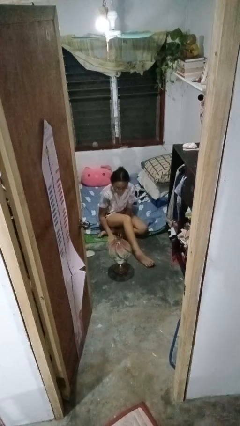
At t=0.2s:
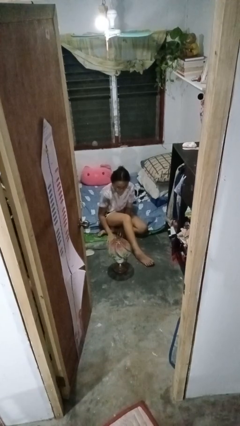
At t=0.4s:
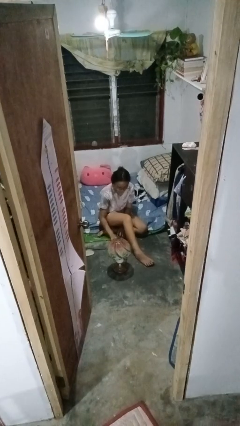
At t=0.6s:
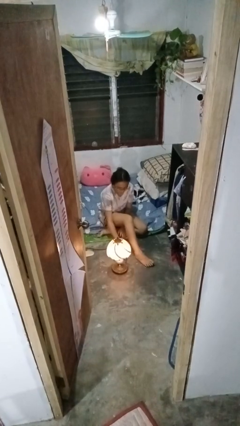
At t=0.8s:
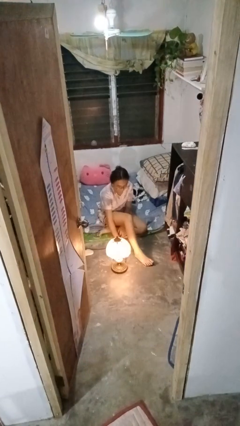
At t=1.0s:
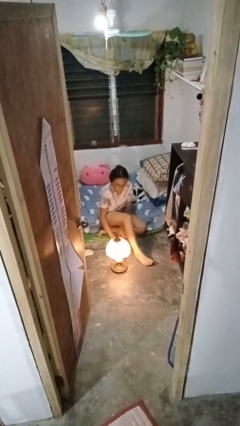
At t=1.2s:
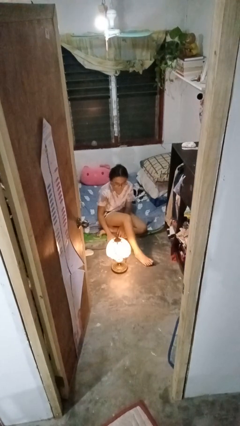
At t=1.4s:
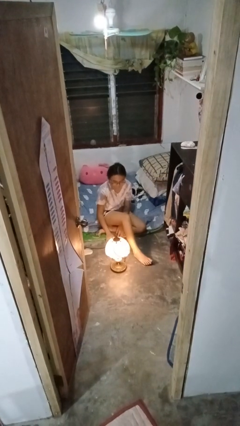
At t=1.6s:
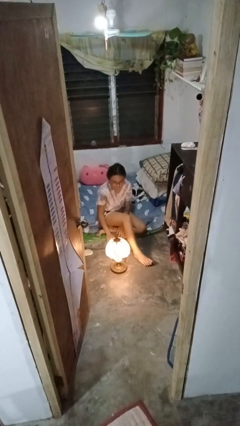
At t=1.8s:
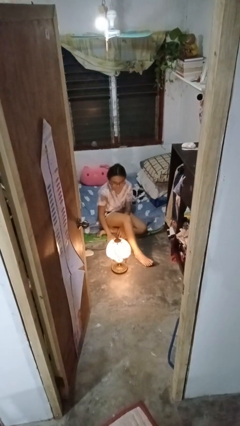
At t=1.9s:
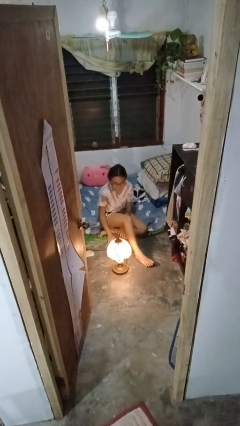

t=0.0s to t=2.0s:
person turns on lamp

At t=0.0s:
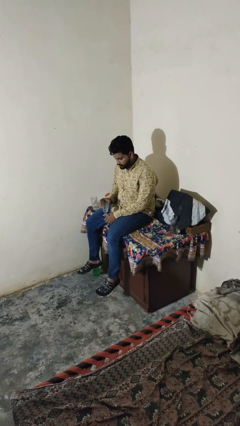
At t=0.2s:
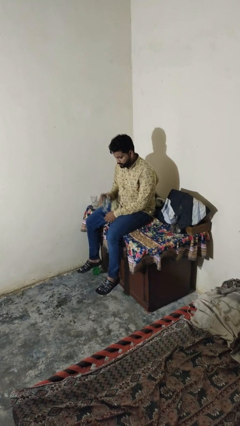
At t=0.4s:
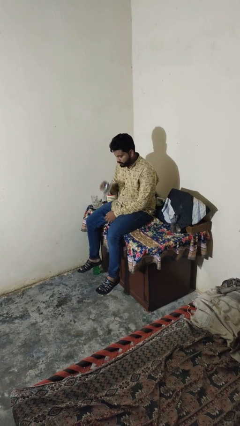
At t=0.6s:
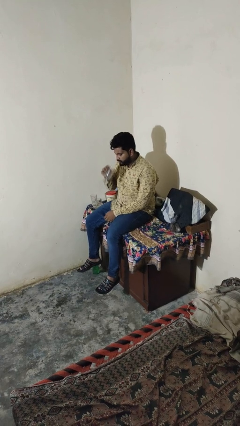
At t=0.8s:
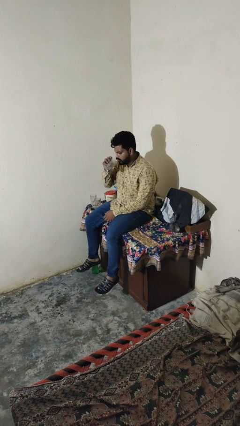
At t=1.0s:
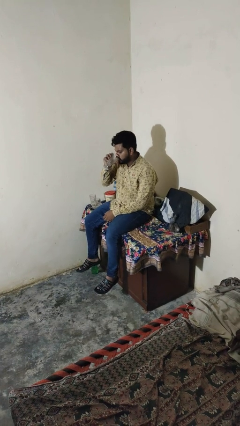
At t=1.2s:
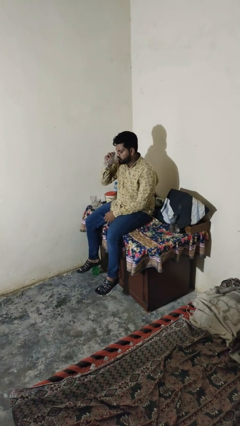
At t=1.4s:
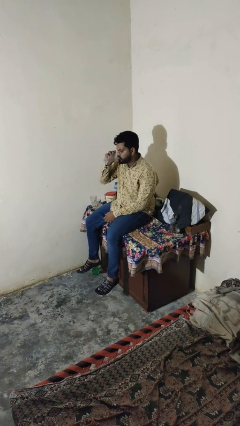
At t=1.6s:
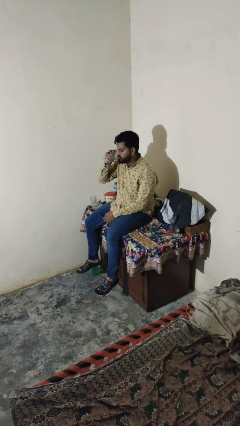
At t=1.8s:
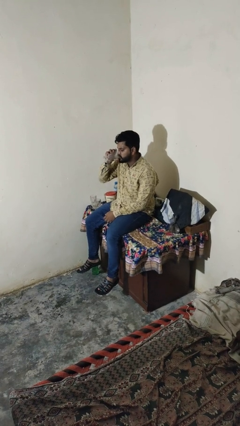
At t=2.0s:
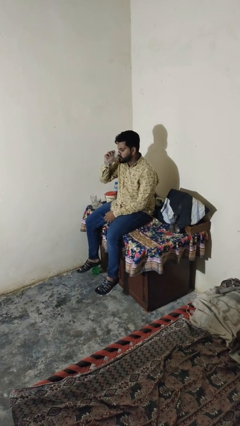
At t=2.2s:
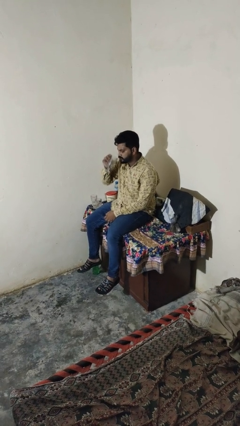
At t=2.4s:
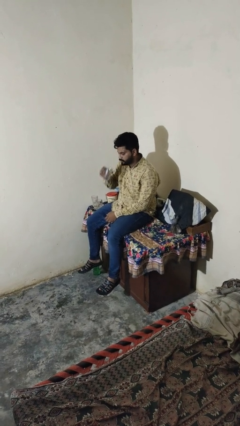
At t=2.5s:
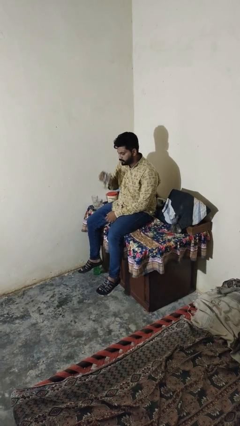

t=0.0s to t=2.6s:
person drinks from shotglass

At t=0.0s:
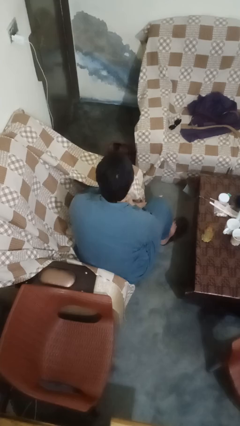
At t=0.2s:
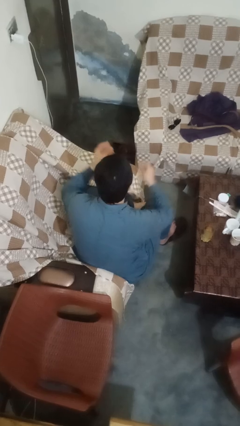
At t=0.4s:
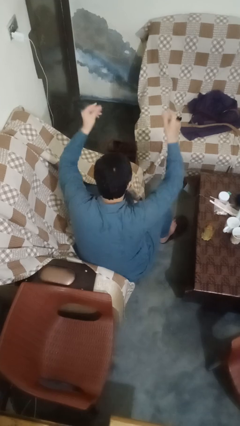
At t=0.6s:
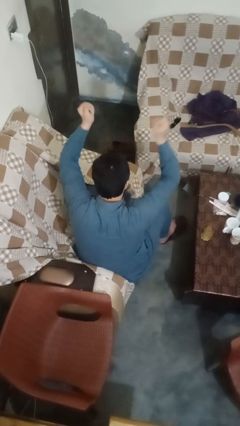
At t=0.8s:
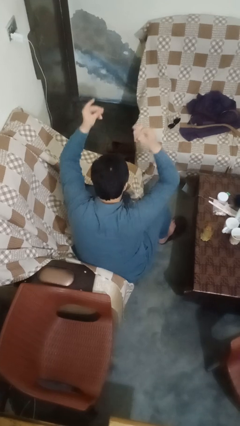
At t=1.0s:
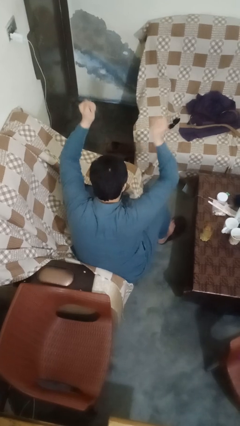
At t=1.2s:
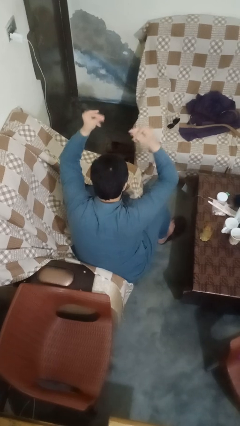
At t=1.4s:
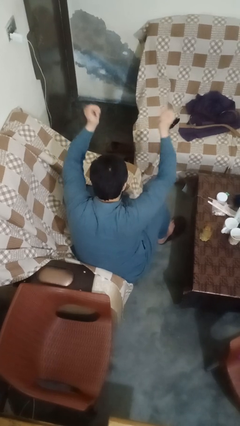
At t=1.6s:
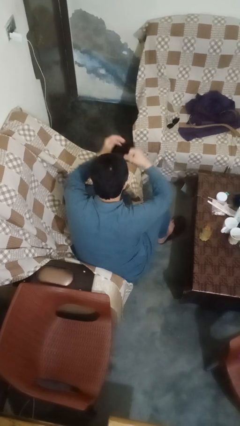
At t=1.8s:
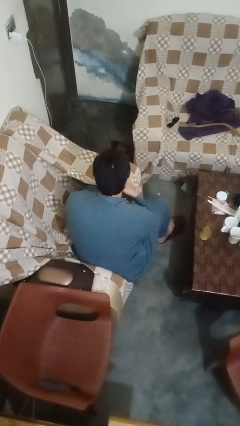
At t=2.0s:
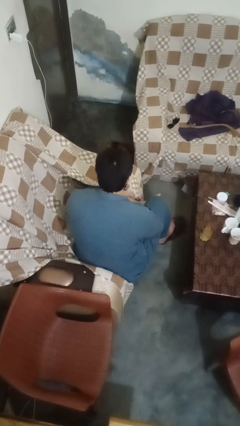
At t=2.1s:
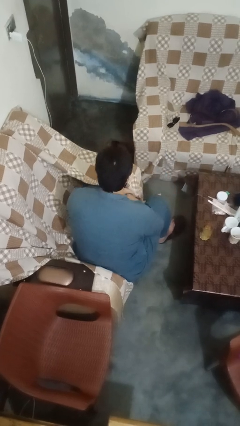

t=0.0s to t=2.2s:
person snaps fingers

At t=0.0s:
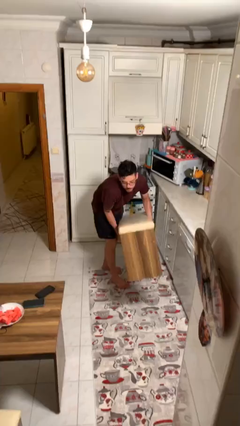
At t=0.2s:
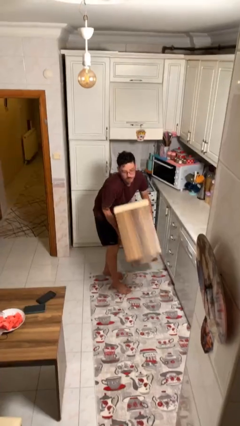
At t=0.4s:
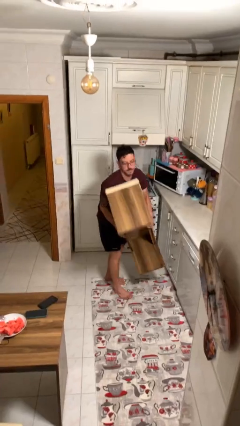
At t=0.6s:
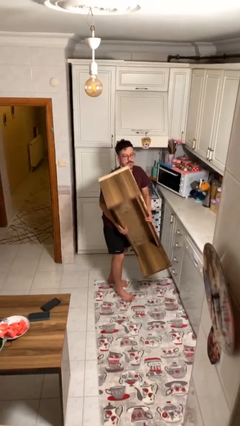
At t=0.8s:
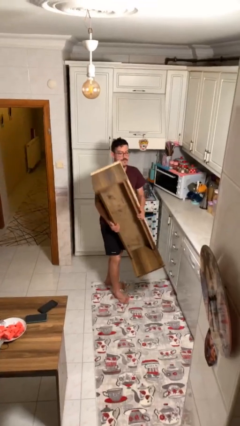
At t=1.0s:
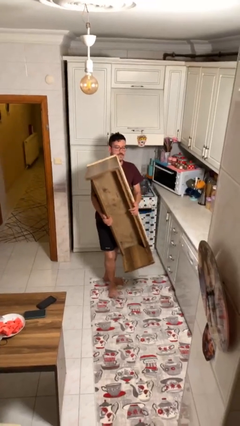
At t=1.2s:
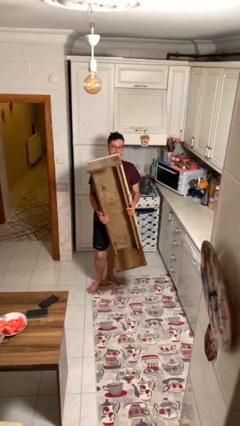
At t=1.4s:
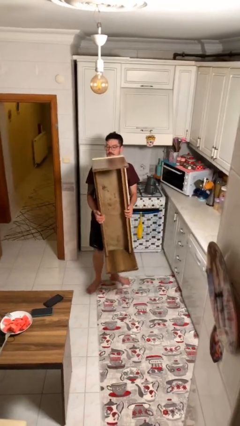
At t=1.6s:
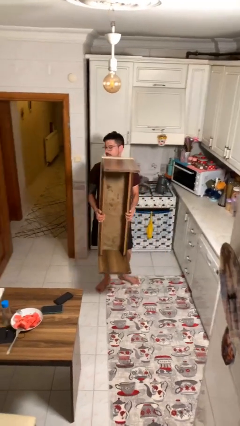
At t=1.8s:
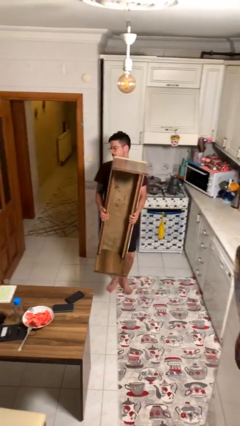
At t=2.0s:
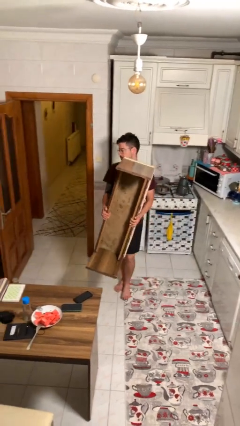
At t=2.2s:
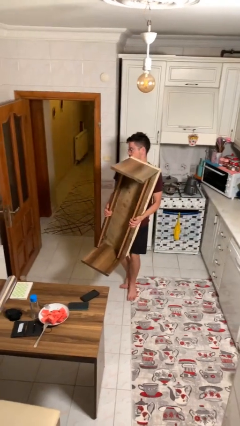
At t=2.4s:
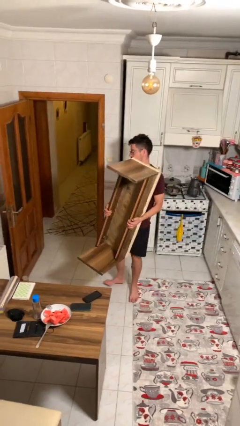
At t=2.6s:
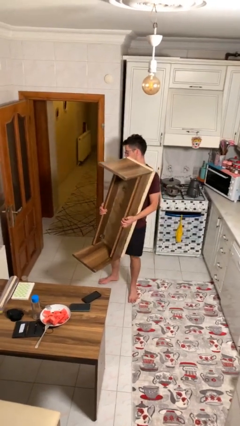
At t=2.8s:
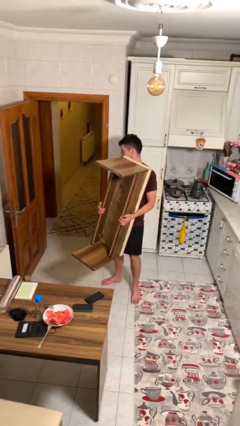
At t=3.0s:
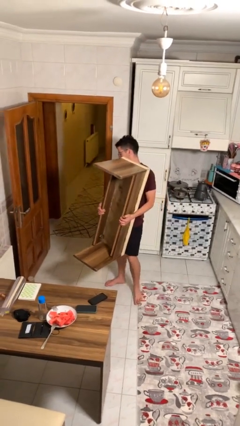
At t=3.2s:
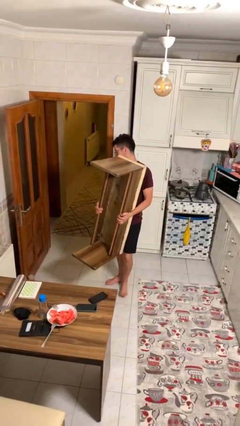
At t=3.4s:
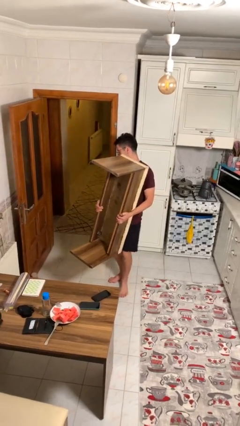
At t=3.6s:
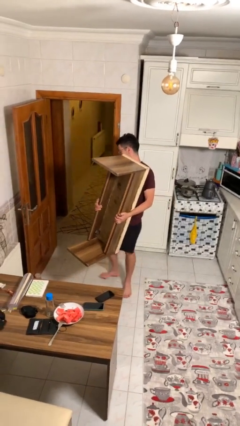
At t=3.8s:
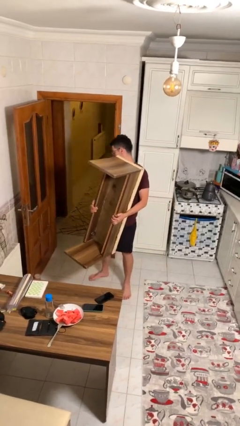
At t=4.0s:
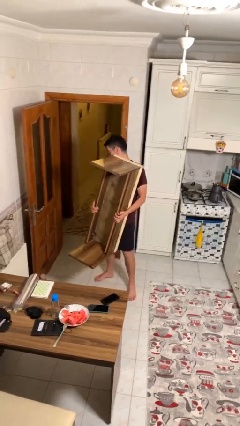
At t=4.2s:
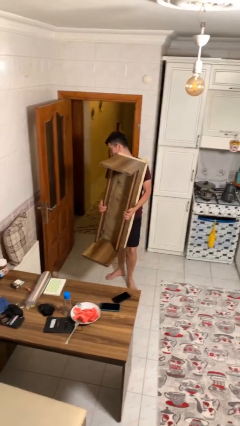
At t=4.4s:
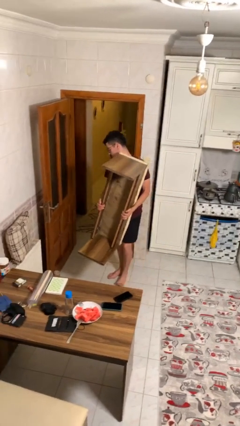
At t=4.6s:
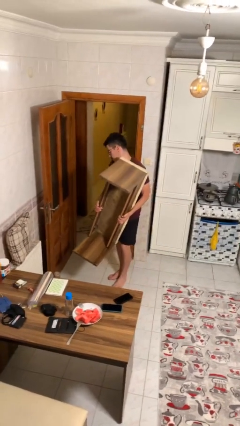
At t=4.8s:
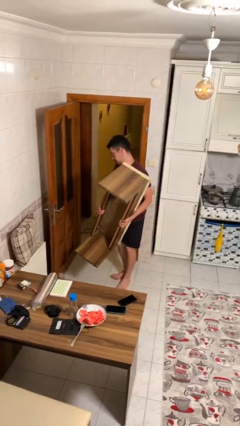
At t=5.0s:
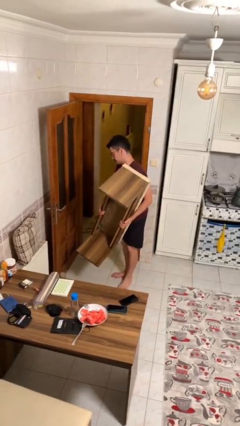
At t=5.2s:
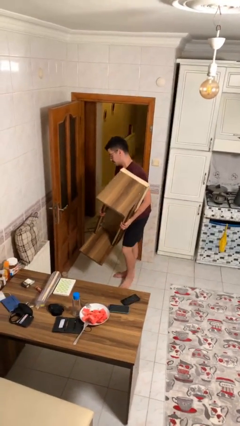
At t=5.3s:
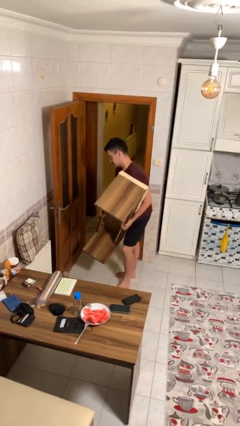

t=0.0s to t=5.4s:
person carries heavy object

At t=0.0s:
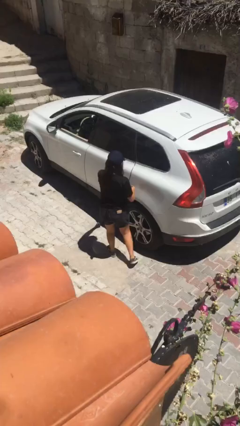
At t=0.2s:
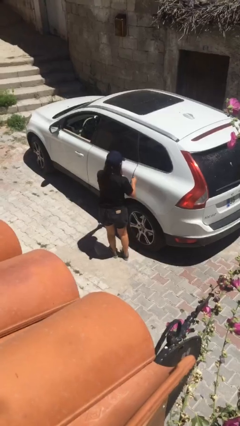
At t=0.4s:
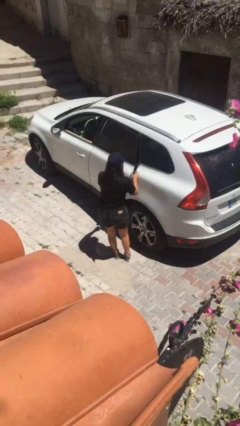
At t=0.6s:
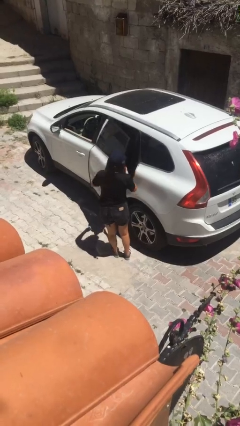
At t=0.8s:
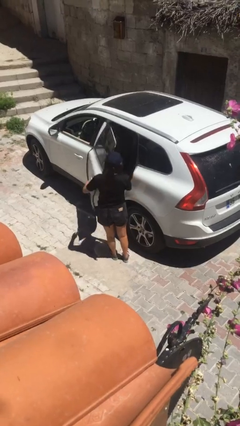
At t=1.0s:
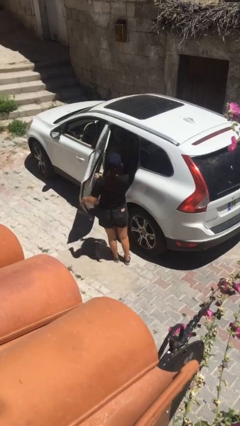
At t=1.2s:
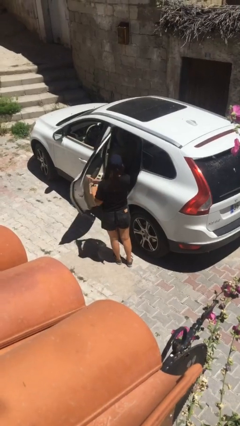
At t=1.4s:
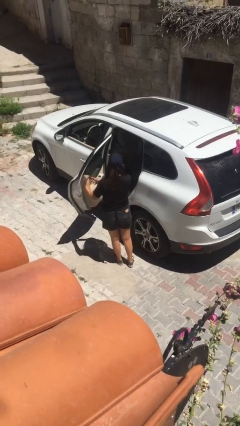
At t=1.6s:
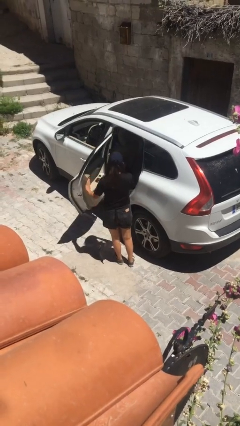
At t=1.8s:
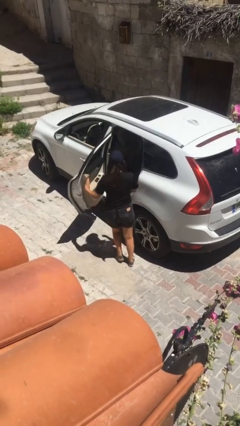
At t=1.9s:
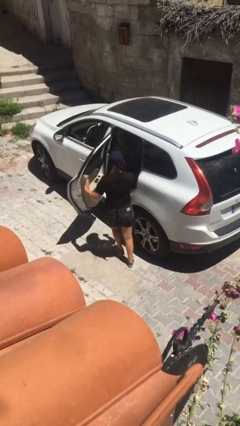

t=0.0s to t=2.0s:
person opens car door

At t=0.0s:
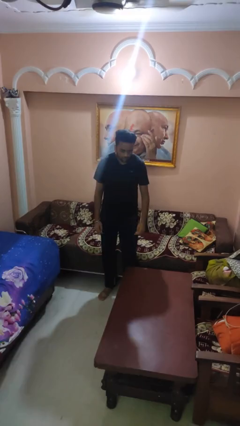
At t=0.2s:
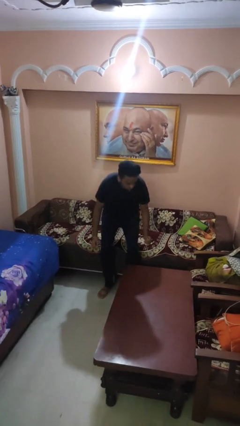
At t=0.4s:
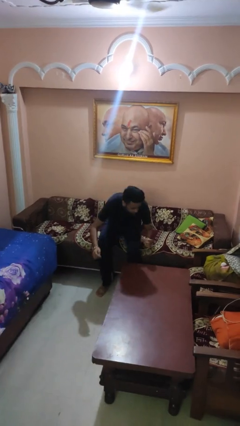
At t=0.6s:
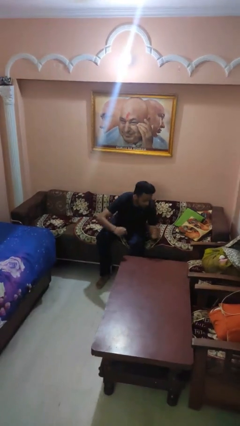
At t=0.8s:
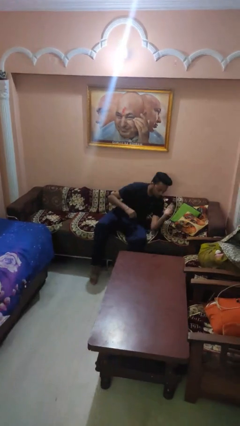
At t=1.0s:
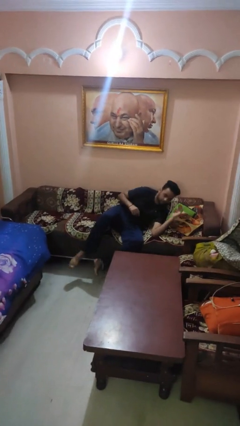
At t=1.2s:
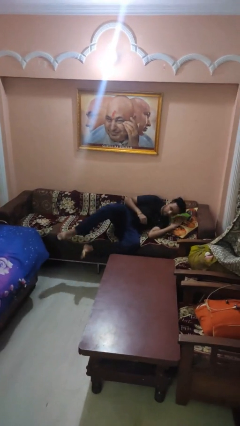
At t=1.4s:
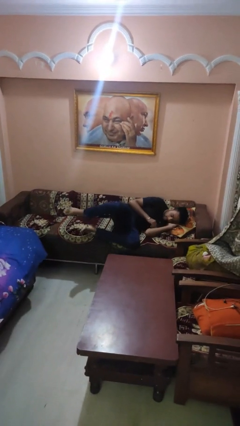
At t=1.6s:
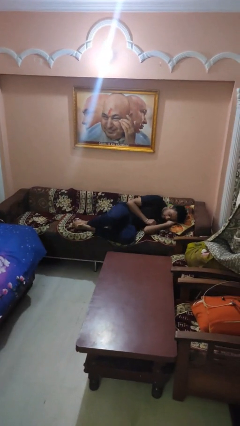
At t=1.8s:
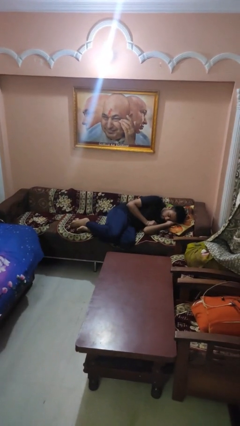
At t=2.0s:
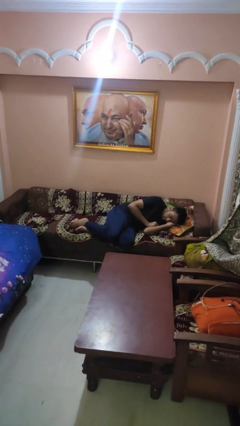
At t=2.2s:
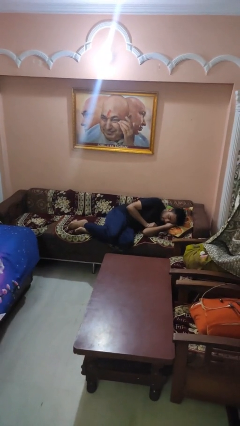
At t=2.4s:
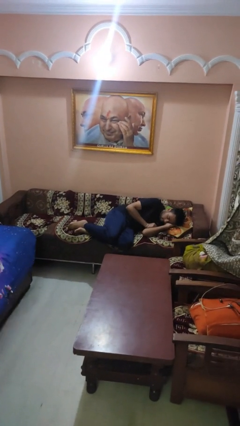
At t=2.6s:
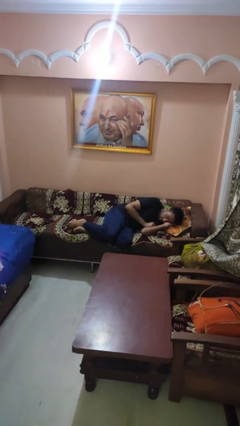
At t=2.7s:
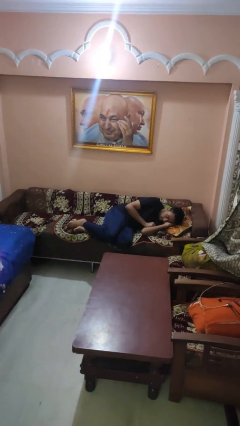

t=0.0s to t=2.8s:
person lies down on couch
